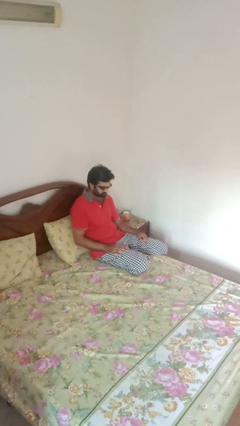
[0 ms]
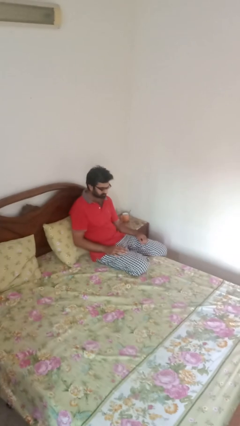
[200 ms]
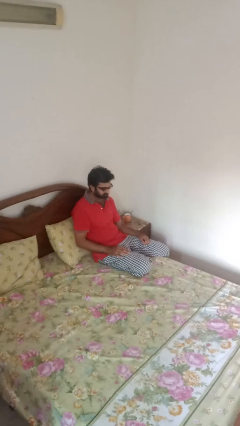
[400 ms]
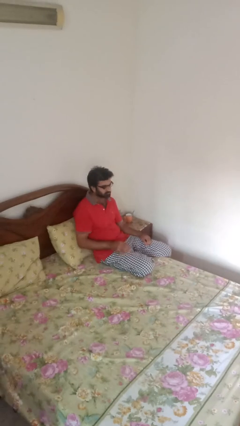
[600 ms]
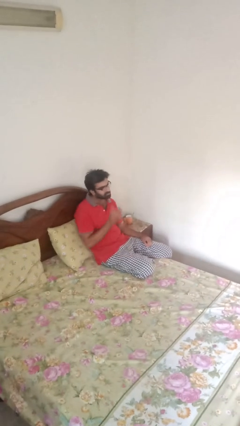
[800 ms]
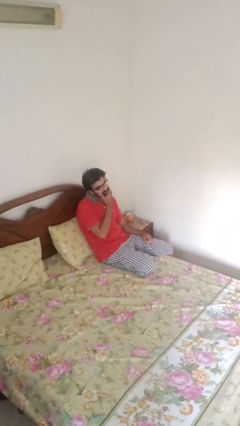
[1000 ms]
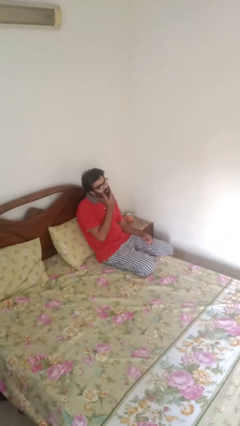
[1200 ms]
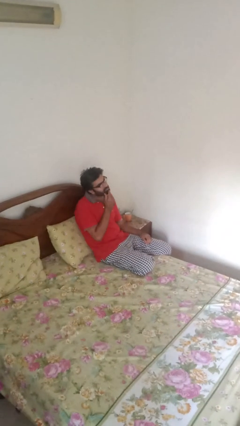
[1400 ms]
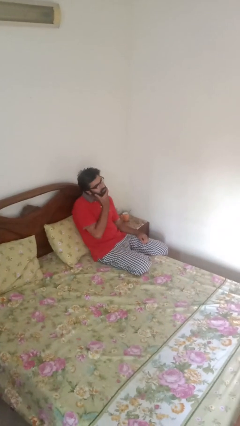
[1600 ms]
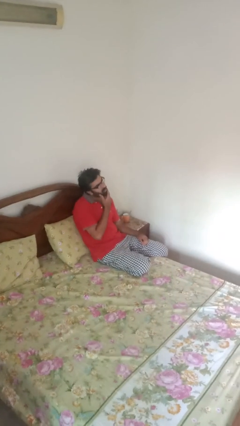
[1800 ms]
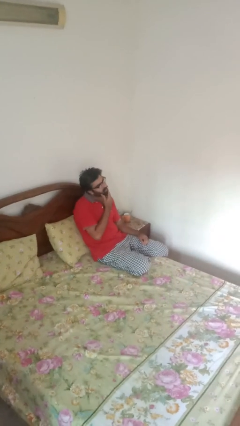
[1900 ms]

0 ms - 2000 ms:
person strokes chin

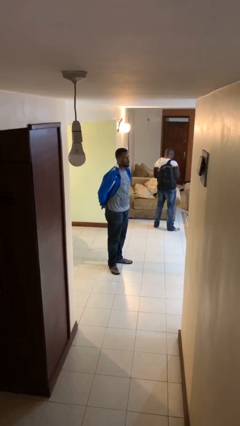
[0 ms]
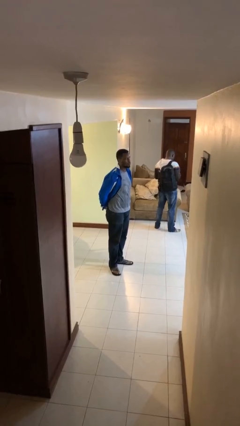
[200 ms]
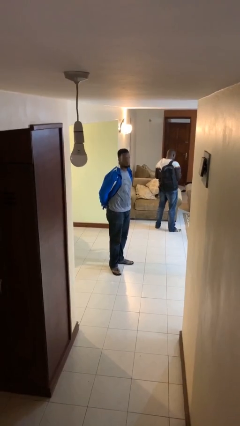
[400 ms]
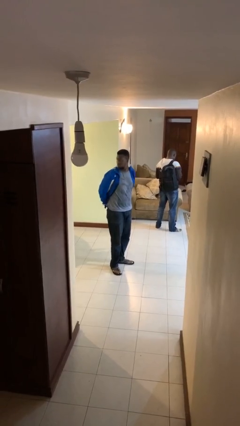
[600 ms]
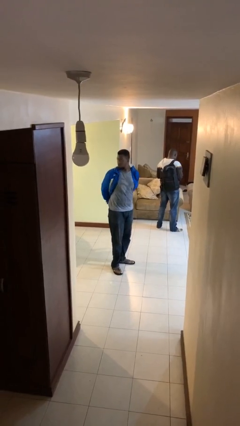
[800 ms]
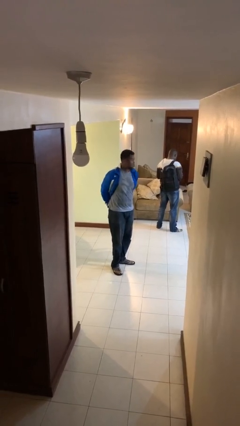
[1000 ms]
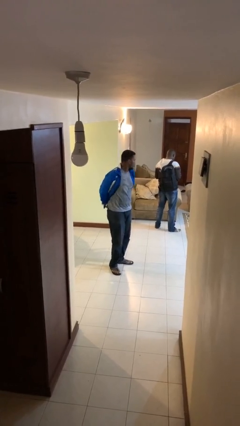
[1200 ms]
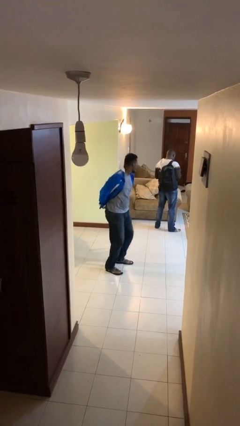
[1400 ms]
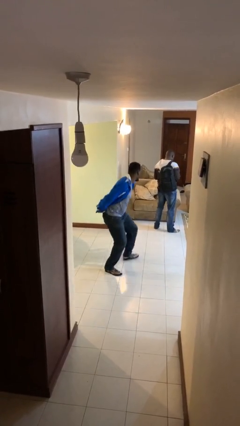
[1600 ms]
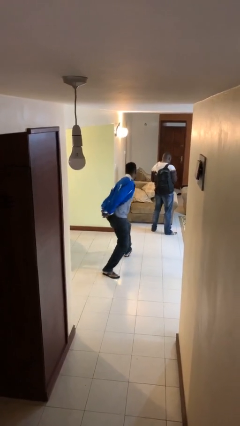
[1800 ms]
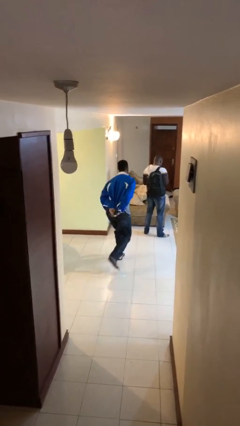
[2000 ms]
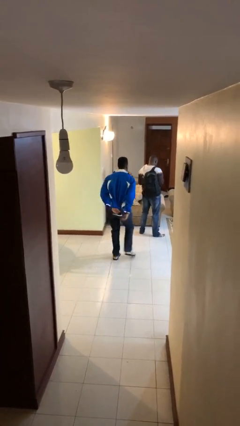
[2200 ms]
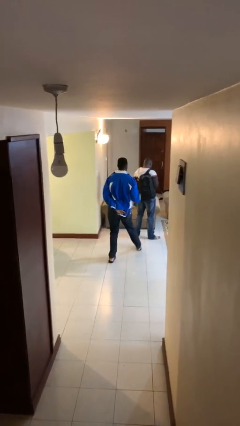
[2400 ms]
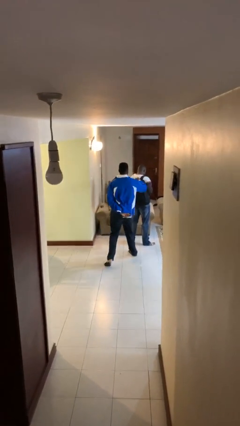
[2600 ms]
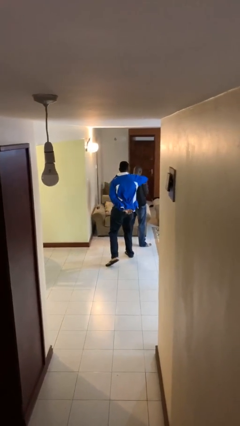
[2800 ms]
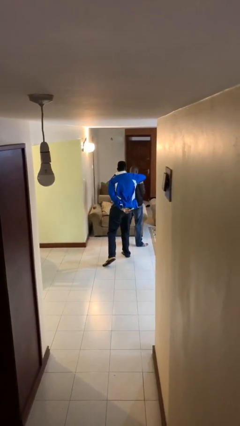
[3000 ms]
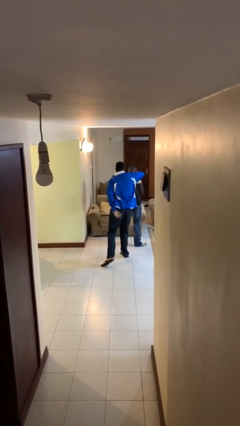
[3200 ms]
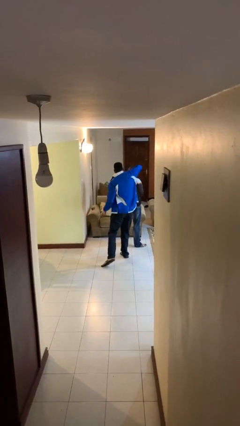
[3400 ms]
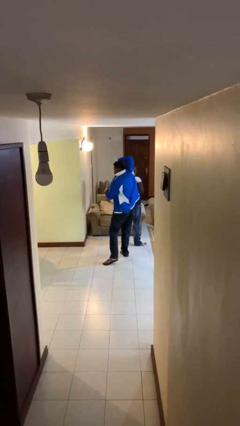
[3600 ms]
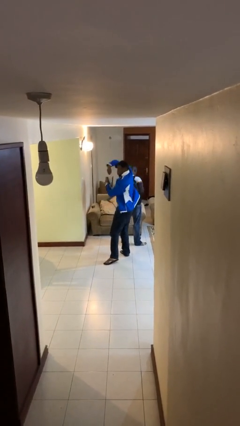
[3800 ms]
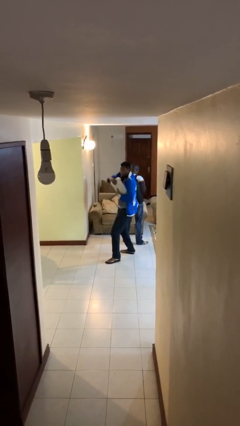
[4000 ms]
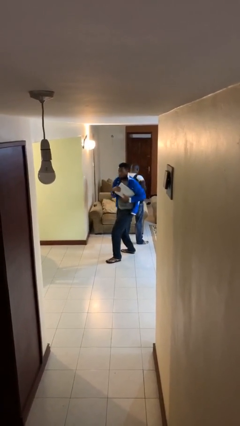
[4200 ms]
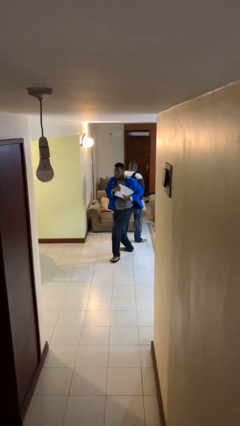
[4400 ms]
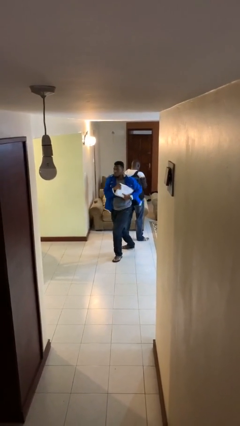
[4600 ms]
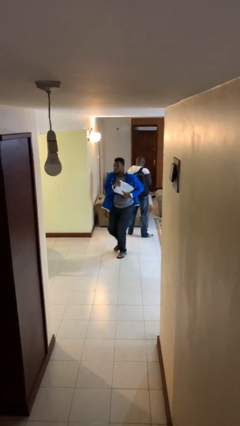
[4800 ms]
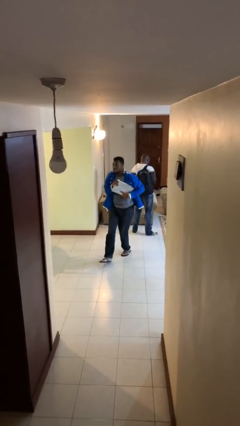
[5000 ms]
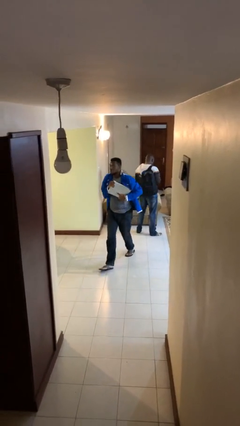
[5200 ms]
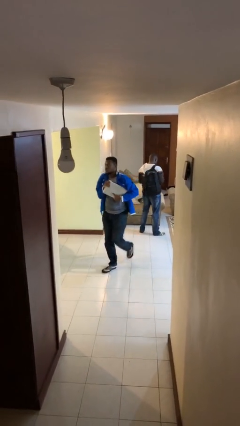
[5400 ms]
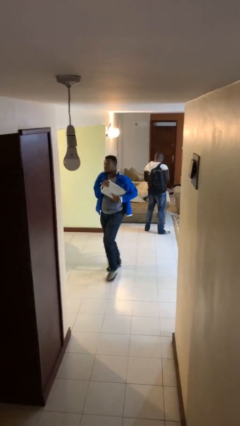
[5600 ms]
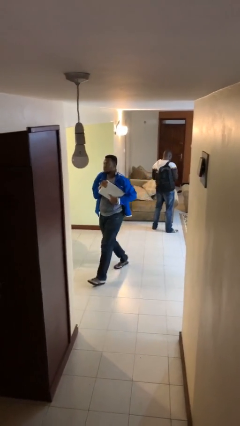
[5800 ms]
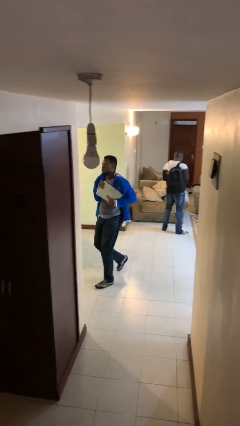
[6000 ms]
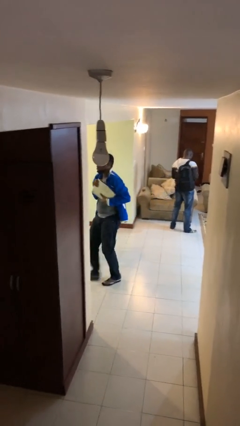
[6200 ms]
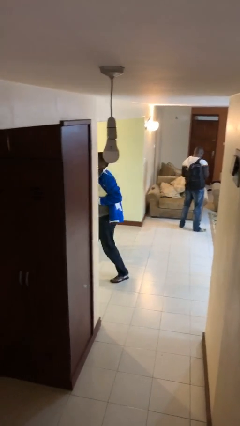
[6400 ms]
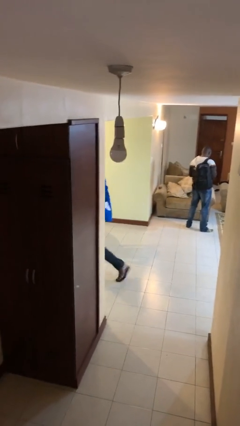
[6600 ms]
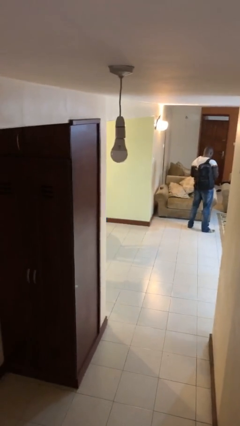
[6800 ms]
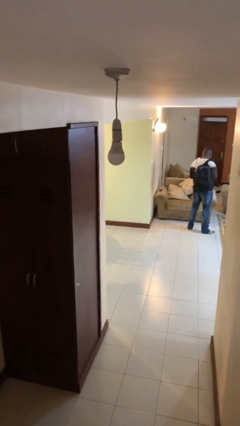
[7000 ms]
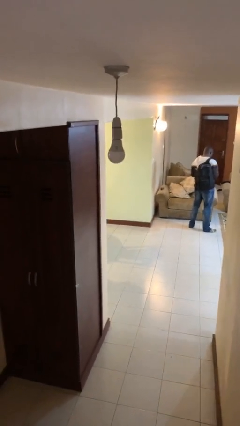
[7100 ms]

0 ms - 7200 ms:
person steals object from person

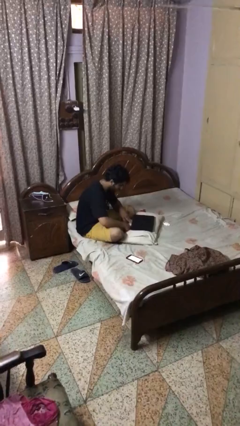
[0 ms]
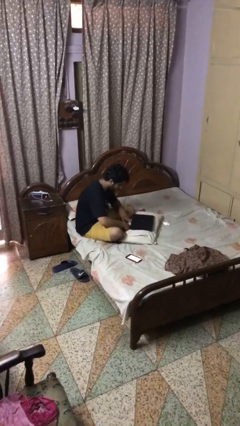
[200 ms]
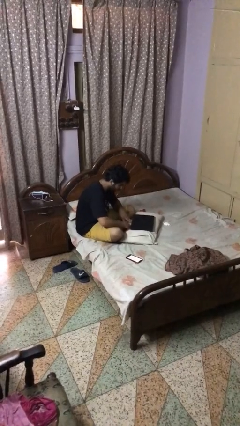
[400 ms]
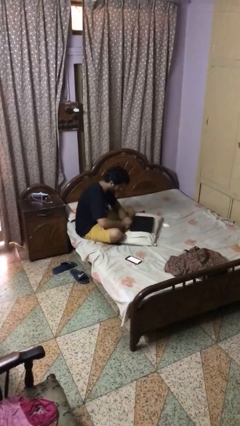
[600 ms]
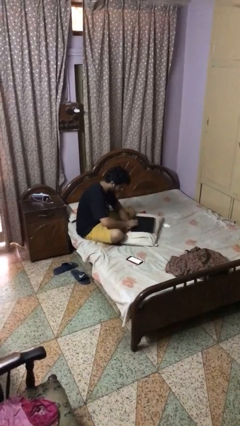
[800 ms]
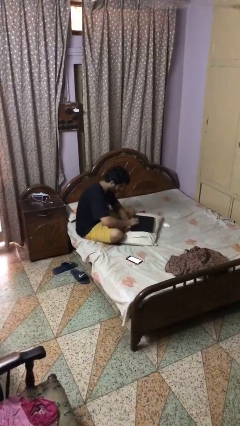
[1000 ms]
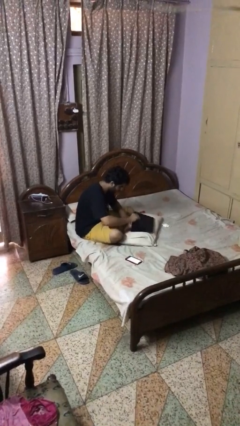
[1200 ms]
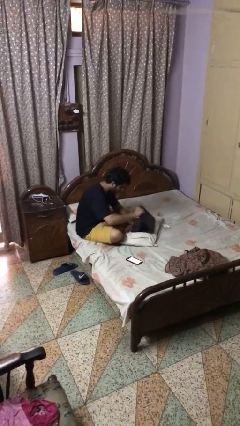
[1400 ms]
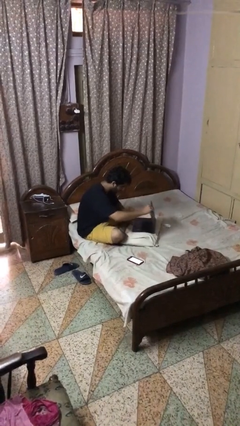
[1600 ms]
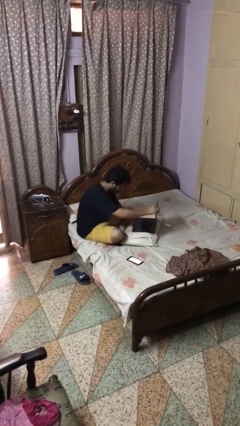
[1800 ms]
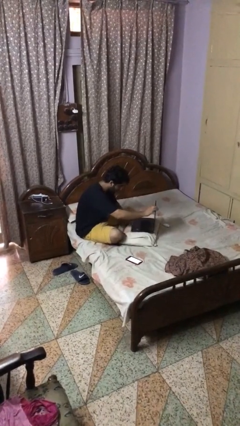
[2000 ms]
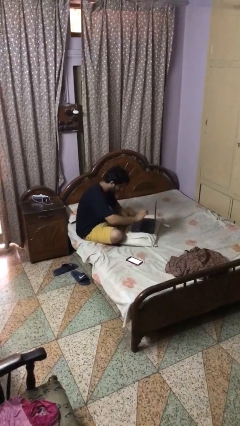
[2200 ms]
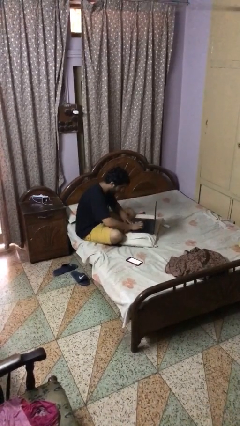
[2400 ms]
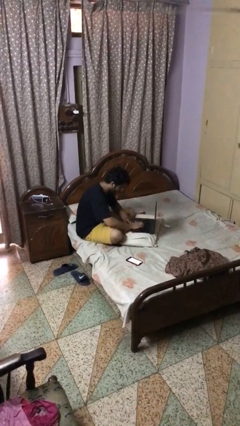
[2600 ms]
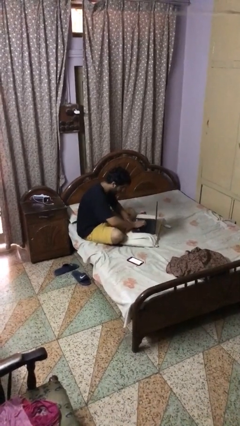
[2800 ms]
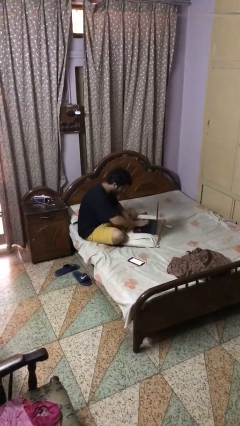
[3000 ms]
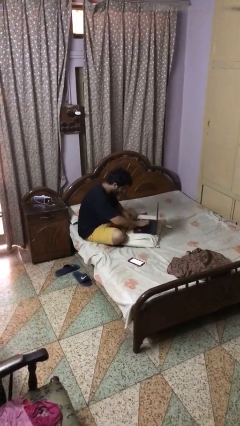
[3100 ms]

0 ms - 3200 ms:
person opens laptop

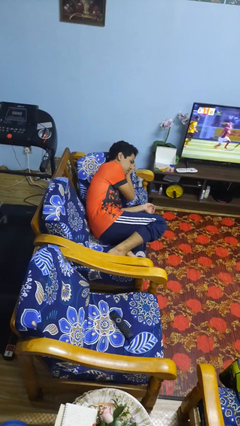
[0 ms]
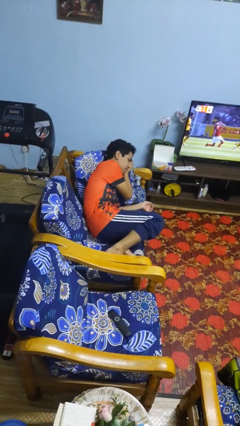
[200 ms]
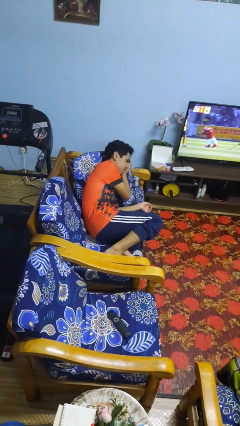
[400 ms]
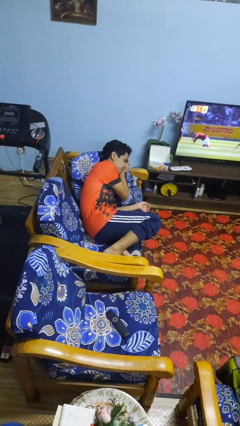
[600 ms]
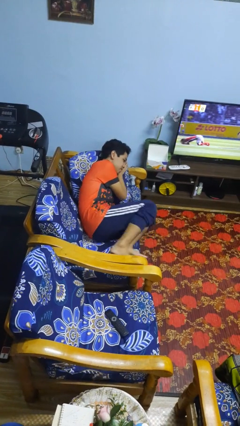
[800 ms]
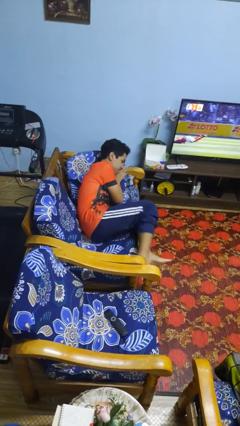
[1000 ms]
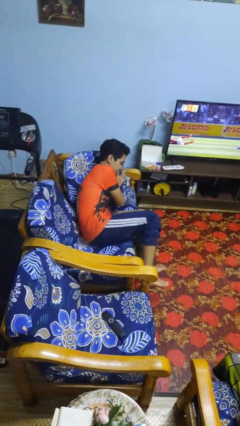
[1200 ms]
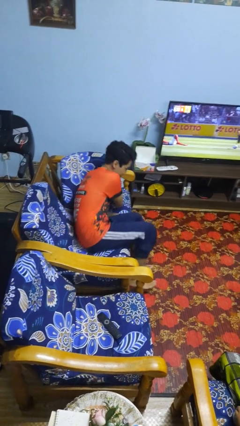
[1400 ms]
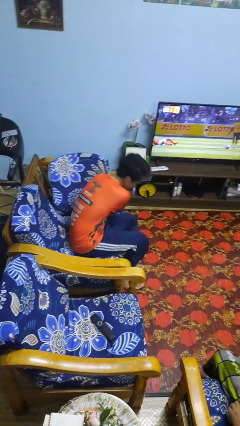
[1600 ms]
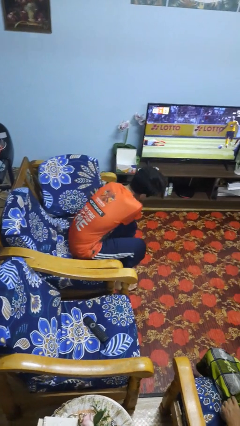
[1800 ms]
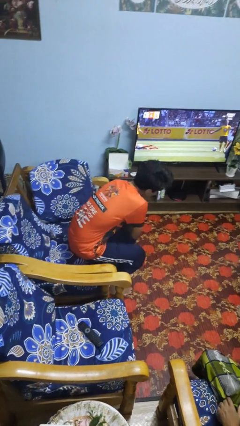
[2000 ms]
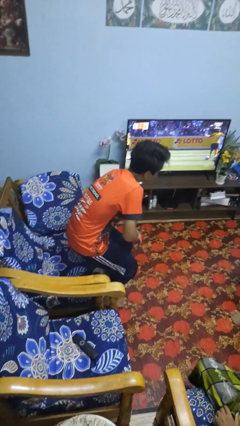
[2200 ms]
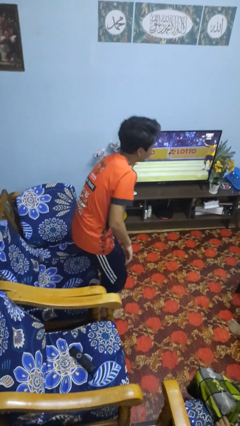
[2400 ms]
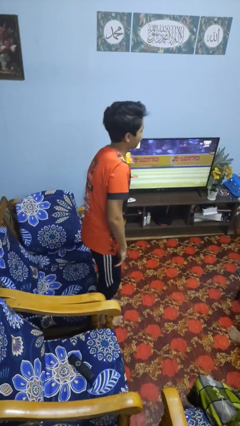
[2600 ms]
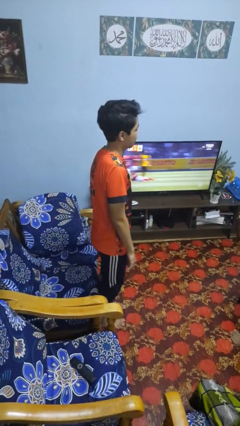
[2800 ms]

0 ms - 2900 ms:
person stands up

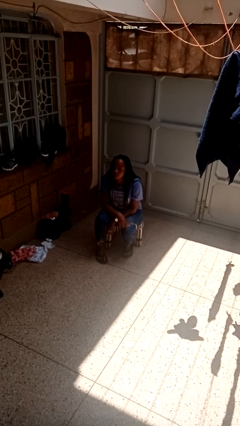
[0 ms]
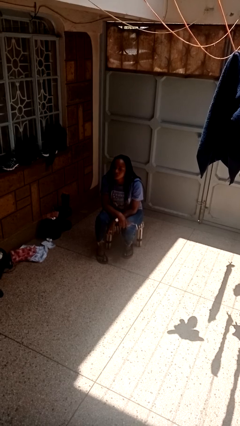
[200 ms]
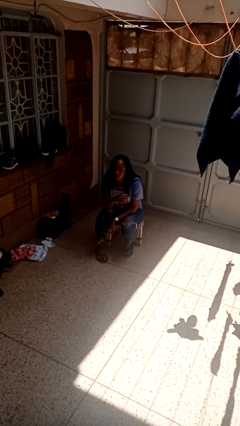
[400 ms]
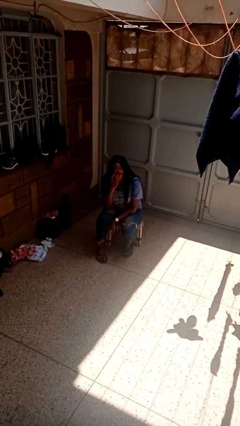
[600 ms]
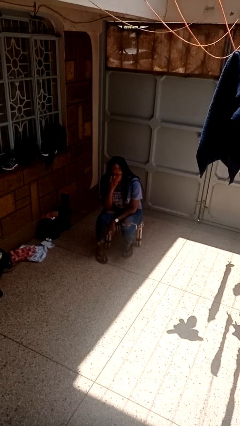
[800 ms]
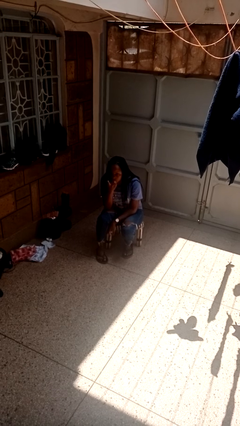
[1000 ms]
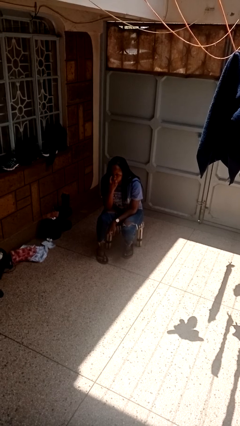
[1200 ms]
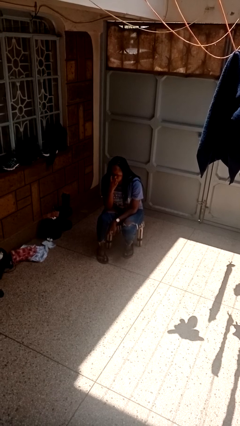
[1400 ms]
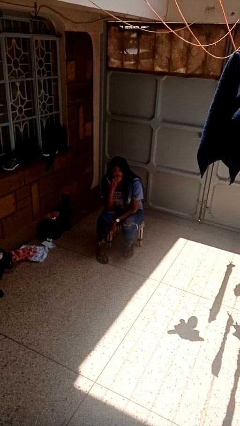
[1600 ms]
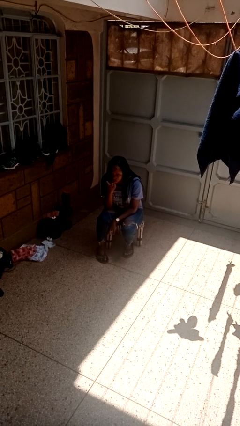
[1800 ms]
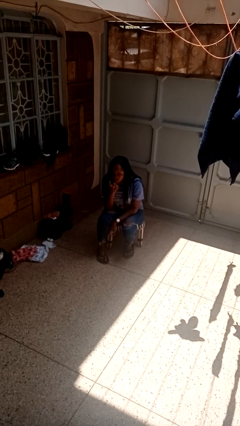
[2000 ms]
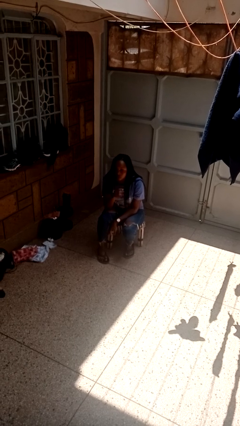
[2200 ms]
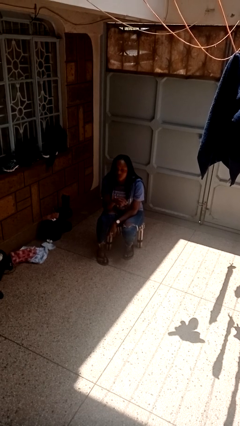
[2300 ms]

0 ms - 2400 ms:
person gestures watch closely
